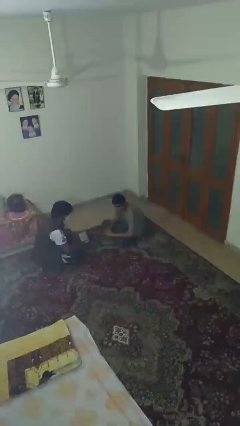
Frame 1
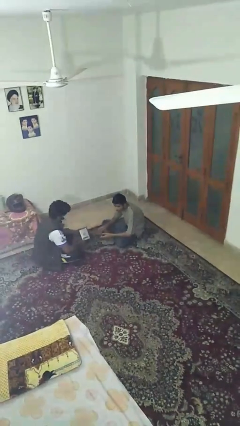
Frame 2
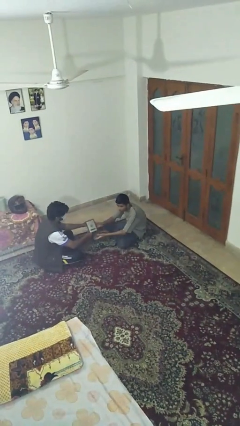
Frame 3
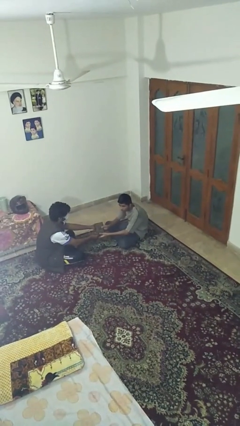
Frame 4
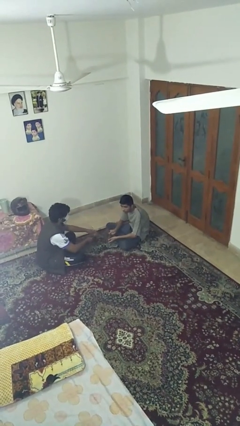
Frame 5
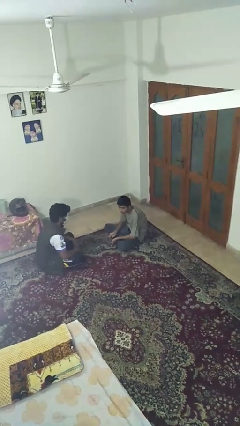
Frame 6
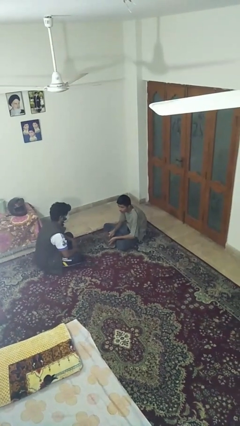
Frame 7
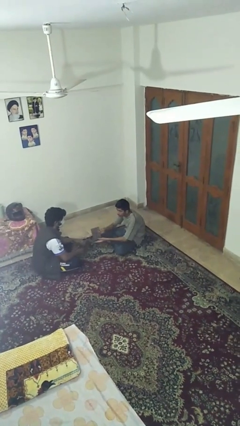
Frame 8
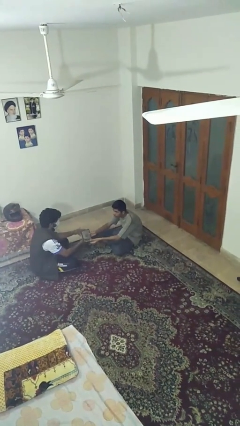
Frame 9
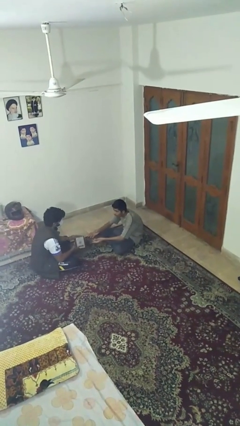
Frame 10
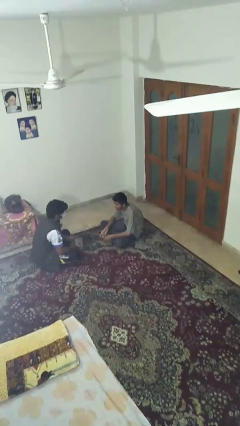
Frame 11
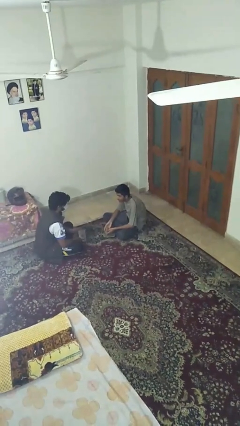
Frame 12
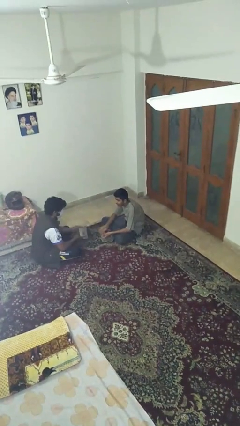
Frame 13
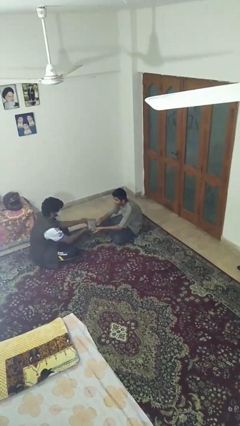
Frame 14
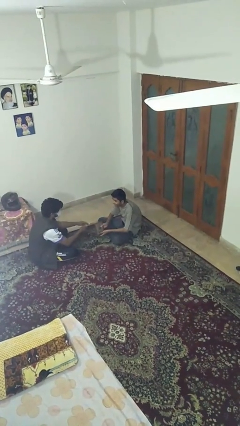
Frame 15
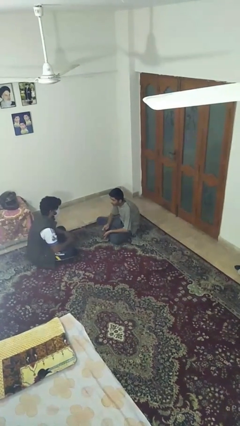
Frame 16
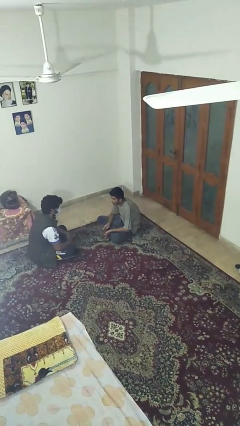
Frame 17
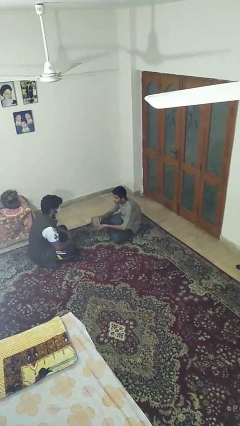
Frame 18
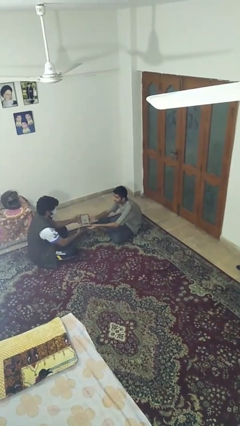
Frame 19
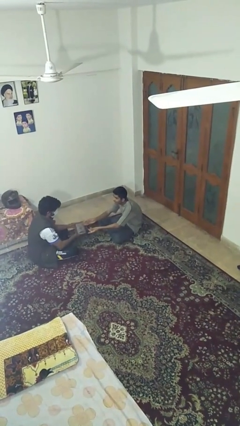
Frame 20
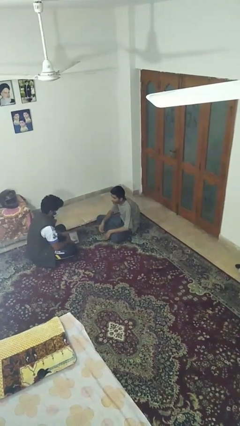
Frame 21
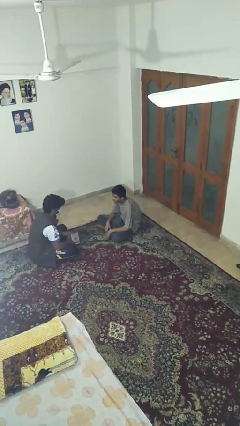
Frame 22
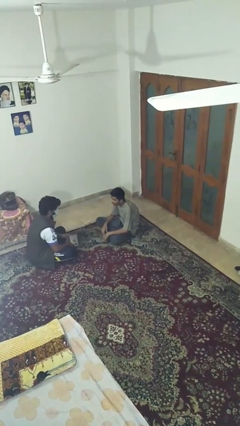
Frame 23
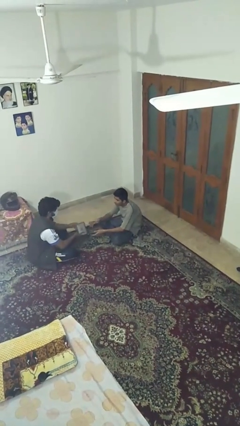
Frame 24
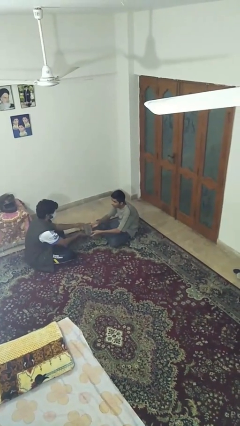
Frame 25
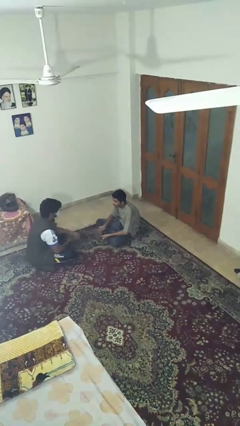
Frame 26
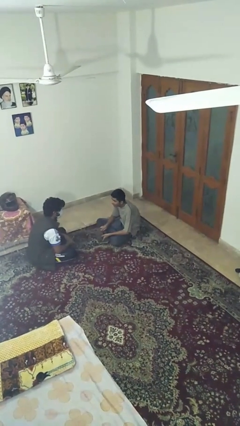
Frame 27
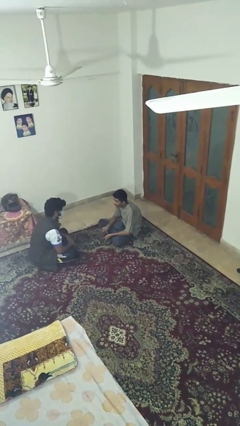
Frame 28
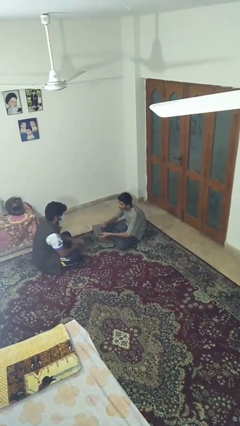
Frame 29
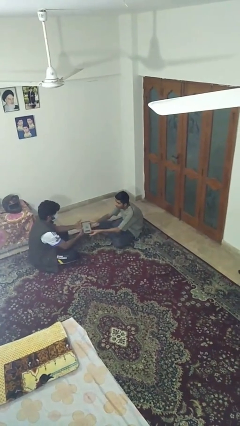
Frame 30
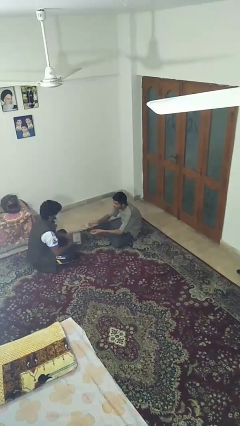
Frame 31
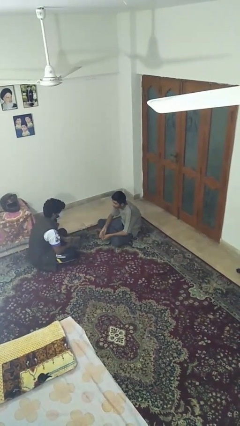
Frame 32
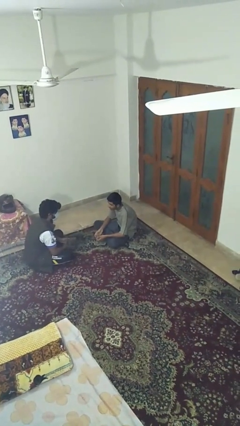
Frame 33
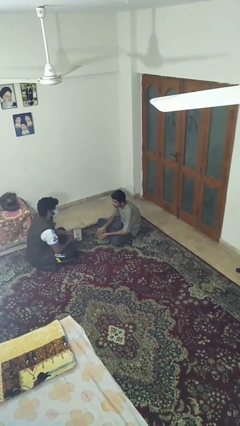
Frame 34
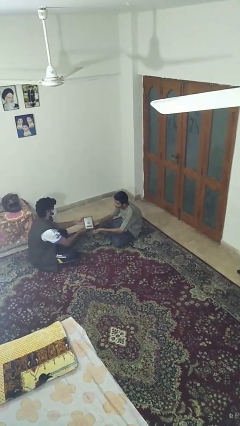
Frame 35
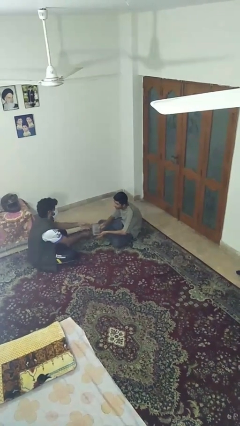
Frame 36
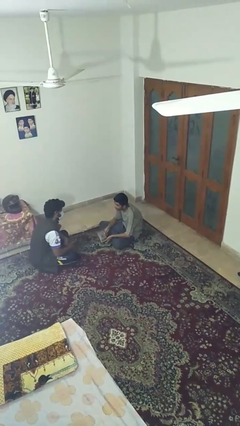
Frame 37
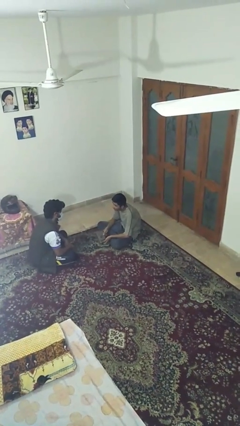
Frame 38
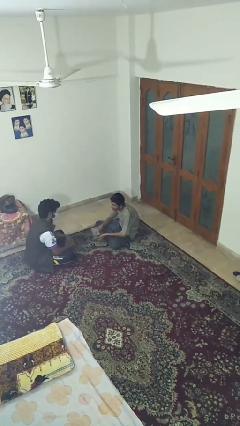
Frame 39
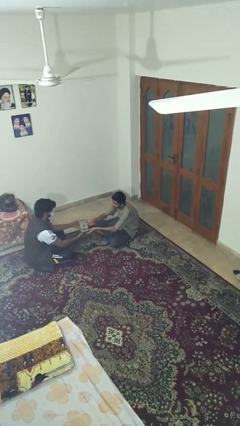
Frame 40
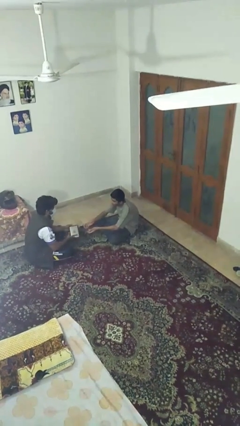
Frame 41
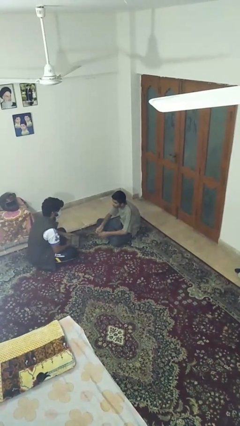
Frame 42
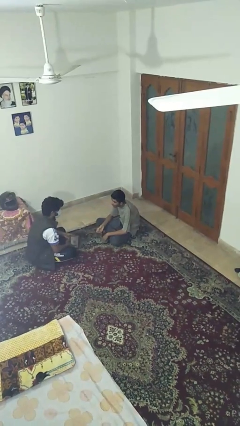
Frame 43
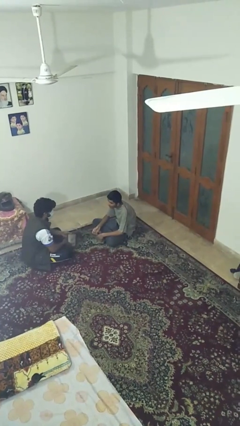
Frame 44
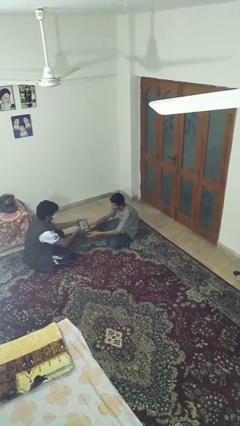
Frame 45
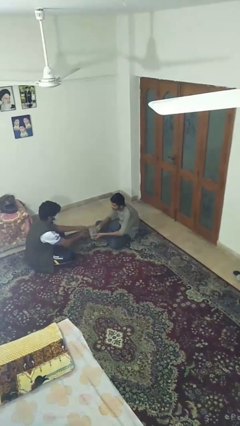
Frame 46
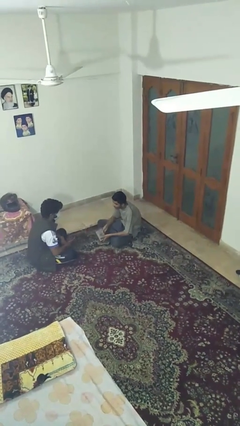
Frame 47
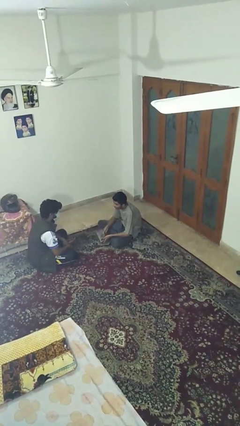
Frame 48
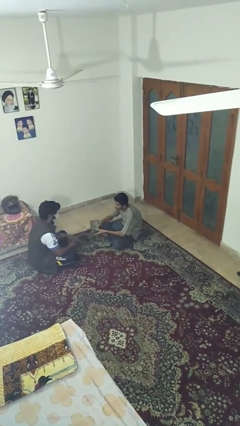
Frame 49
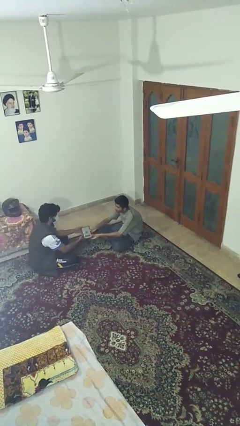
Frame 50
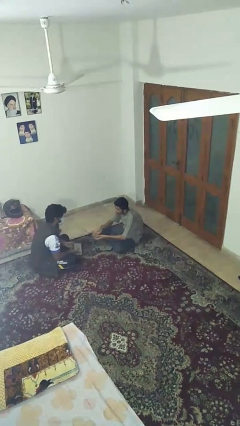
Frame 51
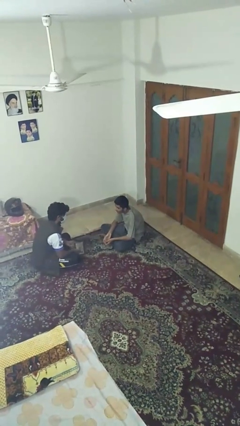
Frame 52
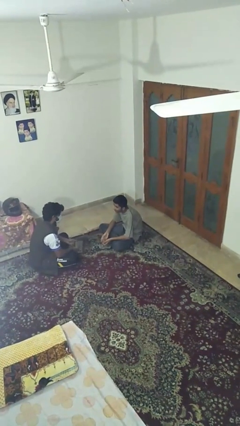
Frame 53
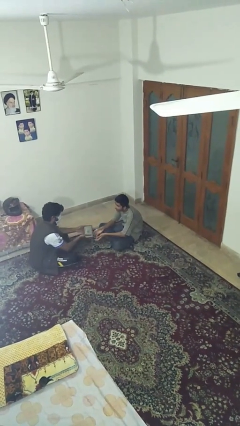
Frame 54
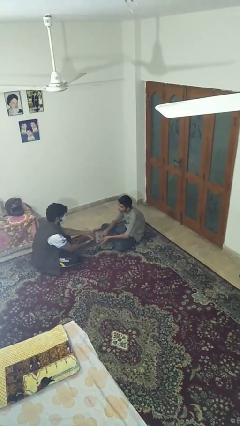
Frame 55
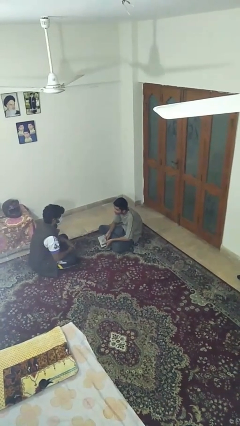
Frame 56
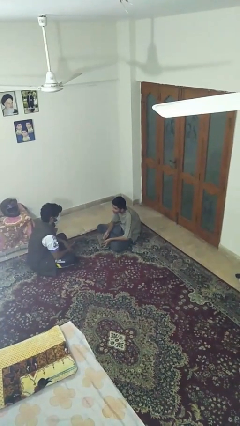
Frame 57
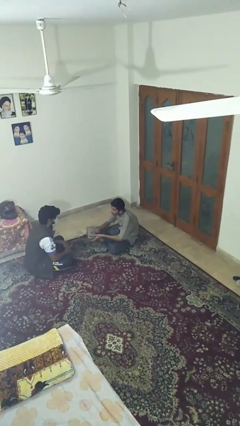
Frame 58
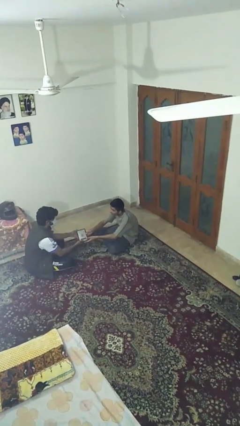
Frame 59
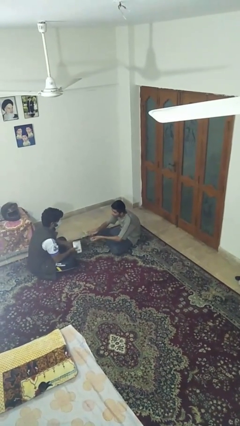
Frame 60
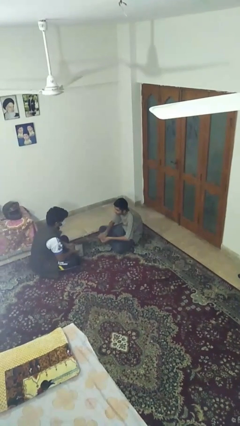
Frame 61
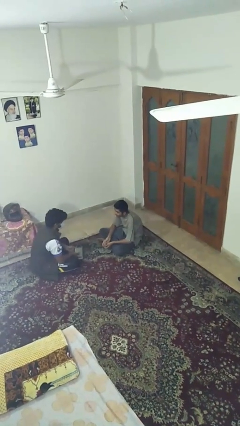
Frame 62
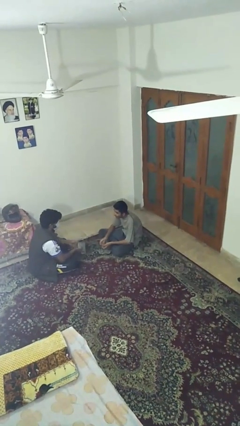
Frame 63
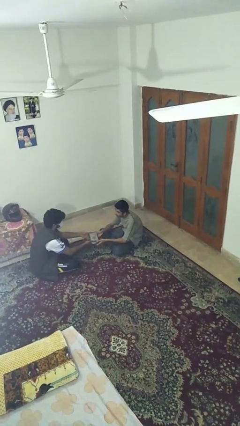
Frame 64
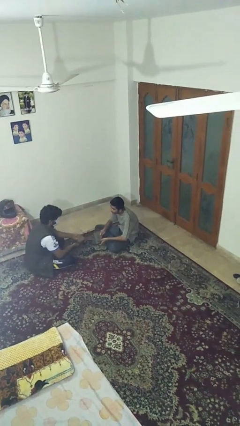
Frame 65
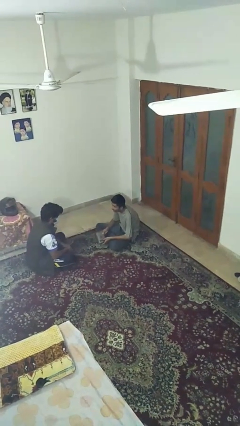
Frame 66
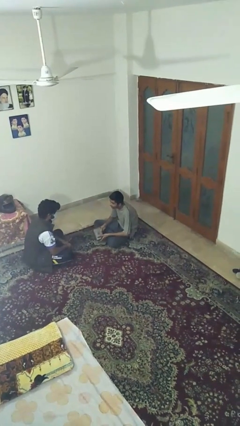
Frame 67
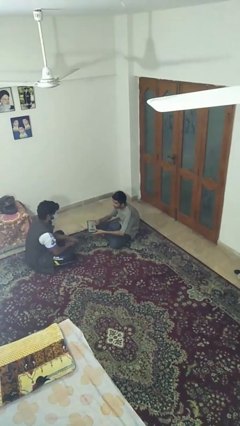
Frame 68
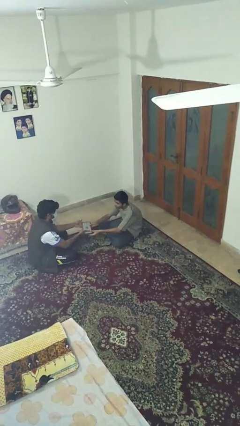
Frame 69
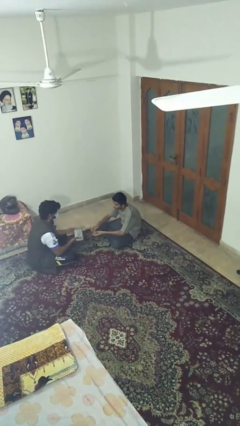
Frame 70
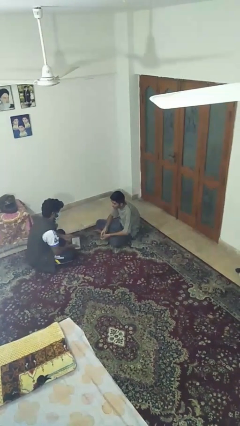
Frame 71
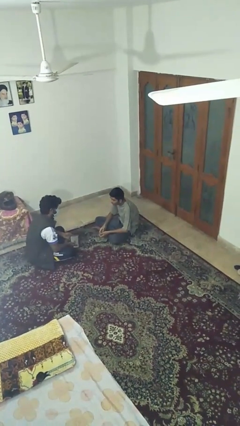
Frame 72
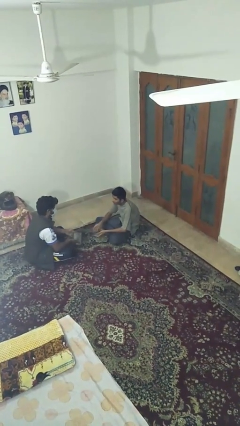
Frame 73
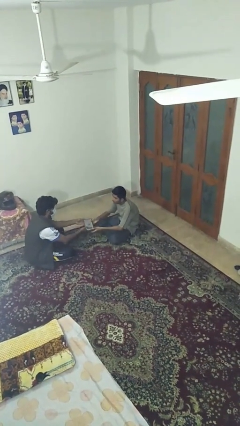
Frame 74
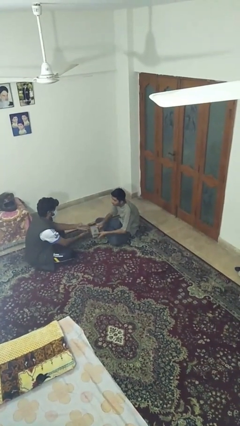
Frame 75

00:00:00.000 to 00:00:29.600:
person transfers object to person

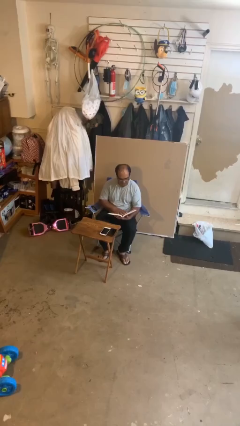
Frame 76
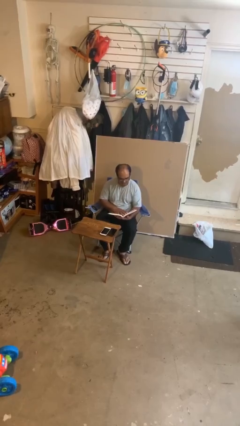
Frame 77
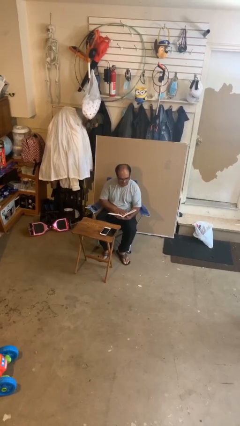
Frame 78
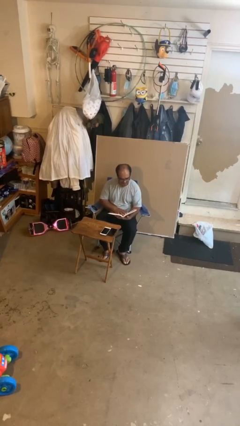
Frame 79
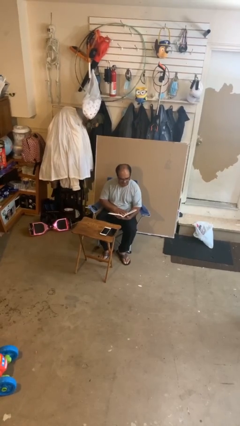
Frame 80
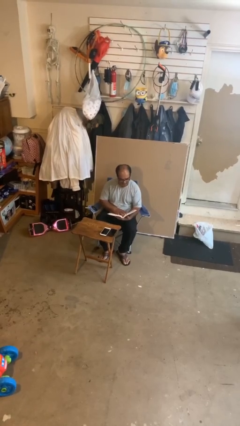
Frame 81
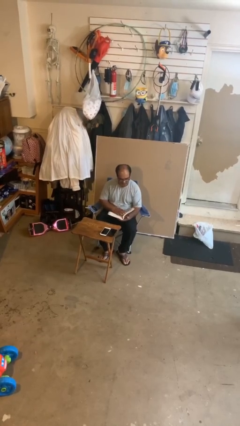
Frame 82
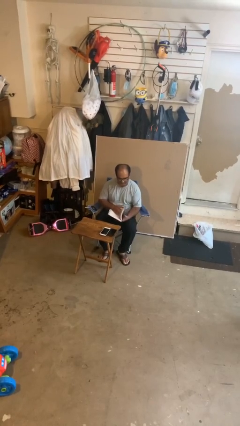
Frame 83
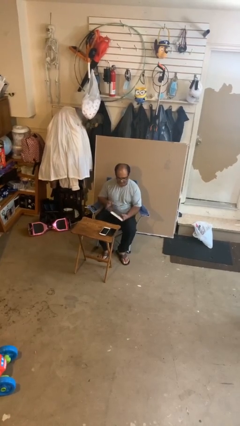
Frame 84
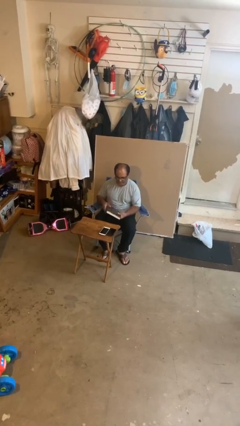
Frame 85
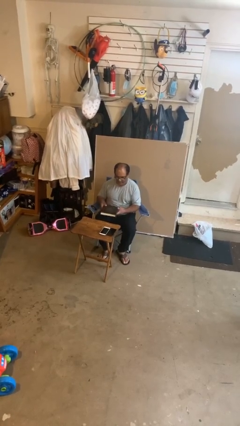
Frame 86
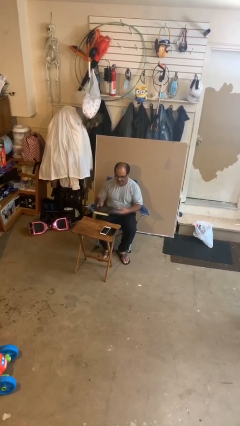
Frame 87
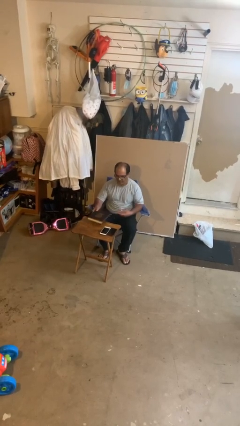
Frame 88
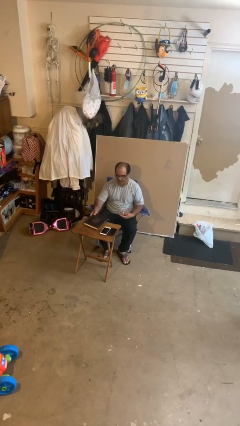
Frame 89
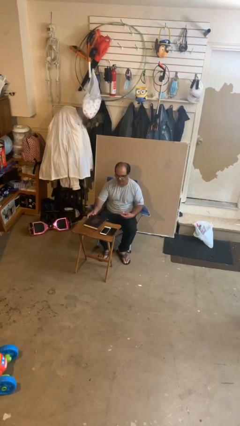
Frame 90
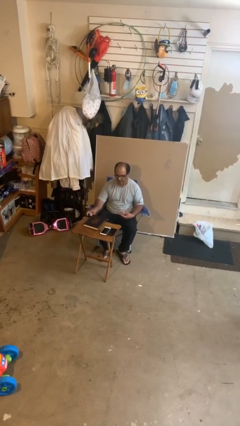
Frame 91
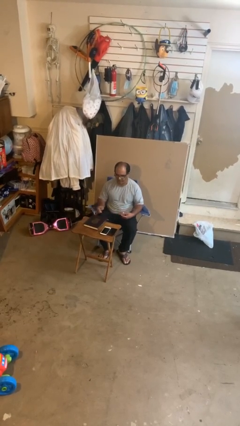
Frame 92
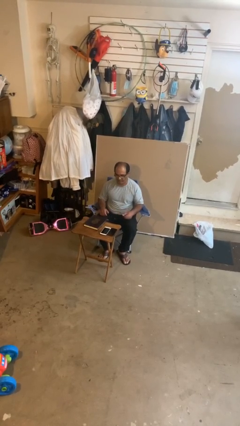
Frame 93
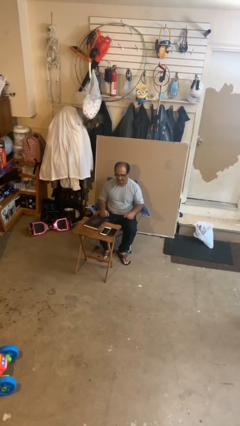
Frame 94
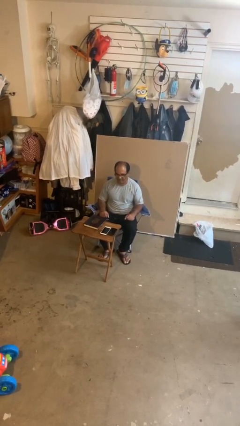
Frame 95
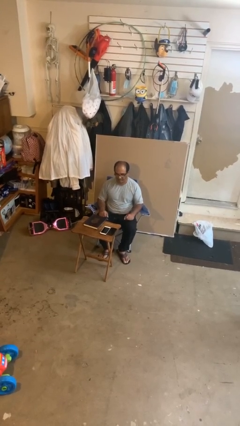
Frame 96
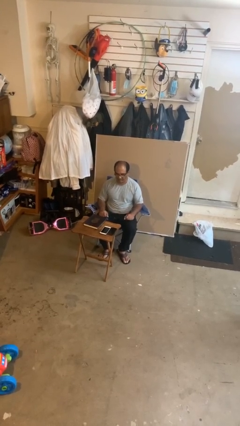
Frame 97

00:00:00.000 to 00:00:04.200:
person puts down object on table
